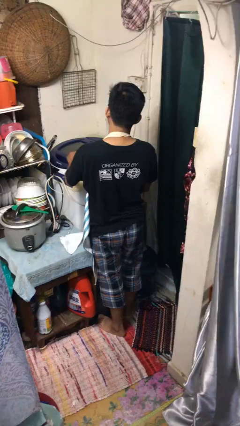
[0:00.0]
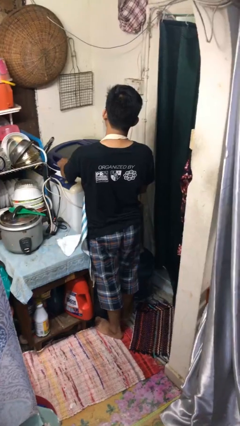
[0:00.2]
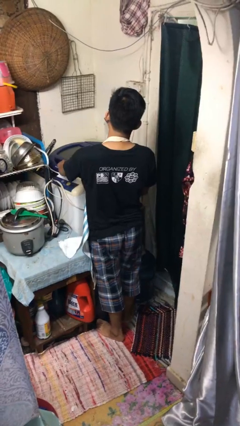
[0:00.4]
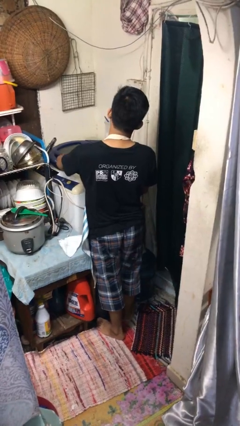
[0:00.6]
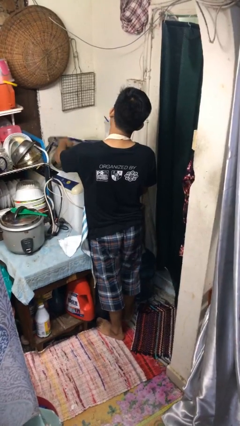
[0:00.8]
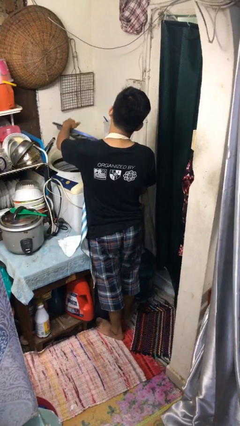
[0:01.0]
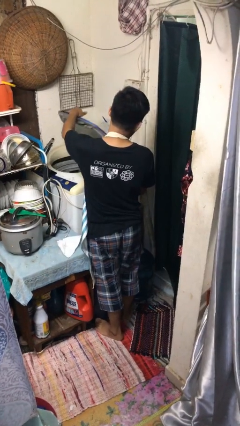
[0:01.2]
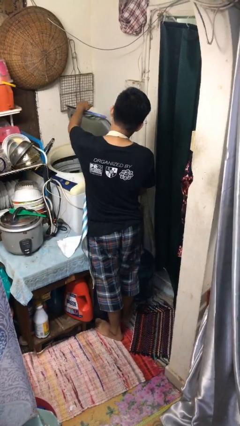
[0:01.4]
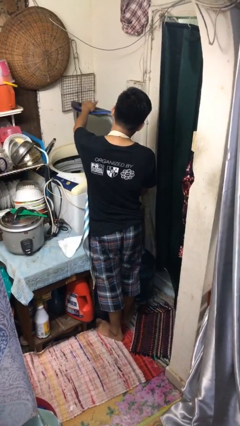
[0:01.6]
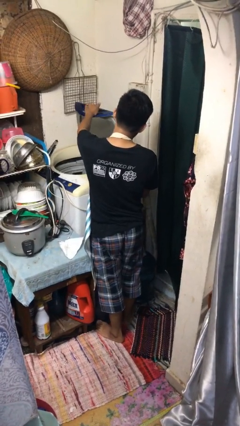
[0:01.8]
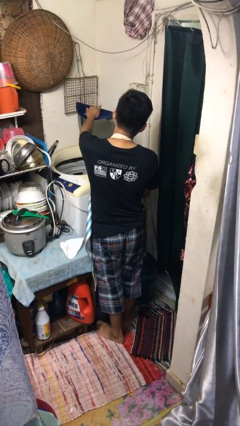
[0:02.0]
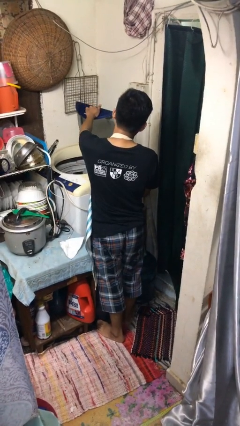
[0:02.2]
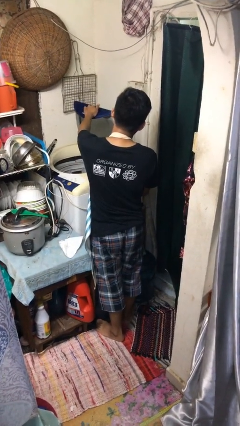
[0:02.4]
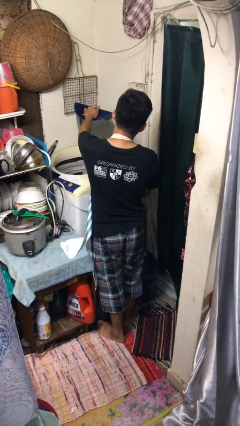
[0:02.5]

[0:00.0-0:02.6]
person opens clothes washer

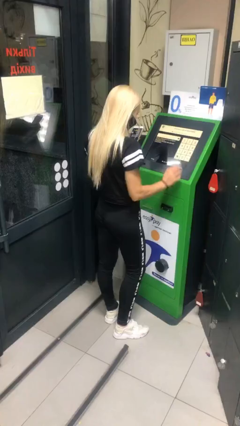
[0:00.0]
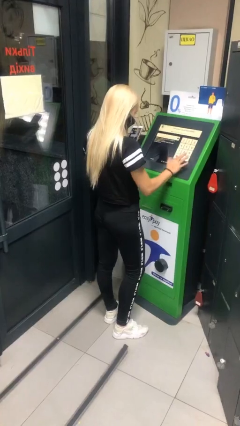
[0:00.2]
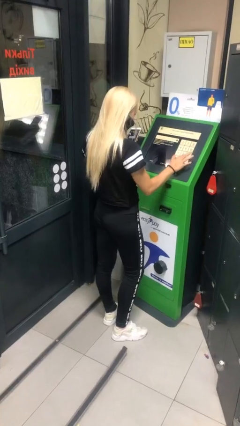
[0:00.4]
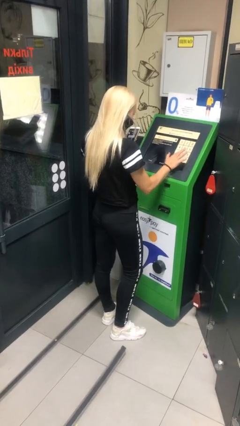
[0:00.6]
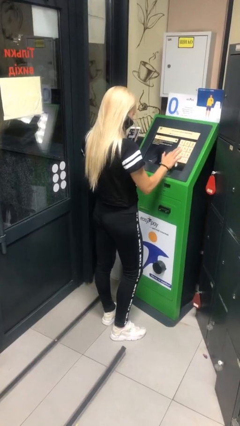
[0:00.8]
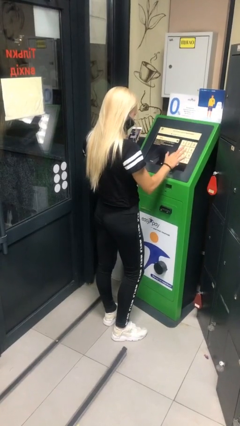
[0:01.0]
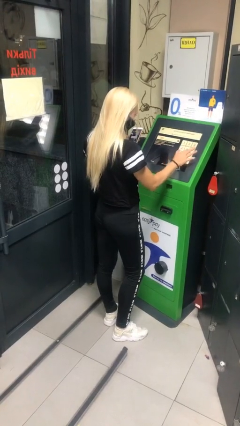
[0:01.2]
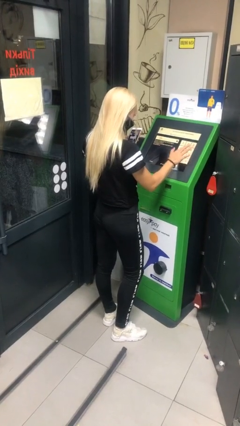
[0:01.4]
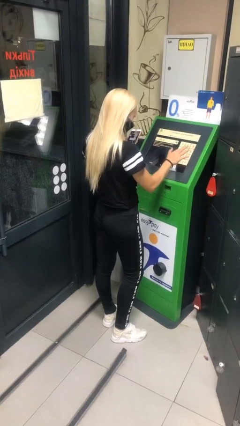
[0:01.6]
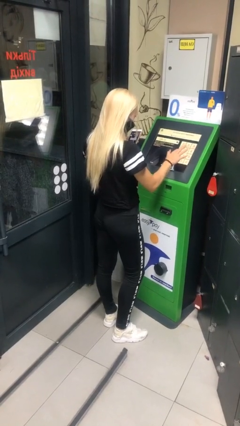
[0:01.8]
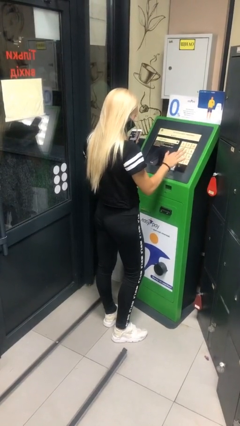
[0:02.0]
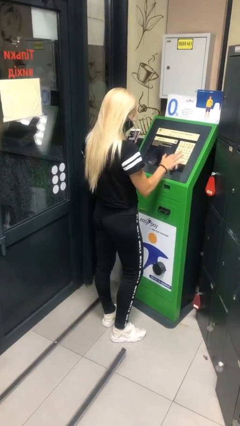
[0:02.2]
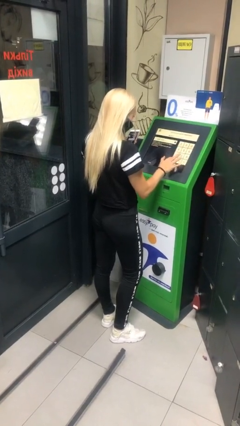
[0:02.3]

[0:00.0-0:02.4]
person purchases from machine

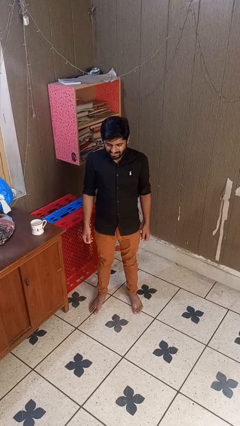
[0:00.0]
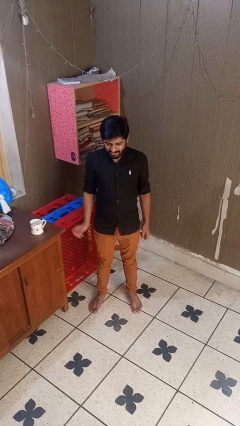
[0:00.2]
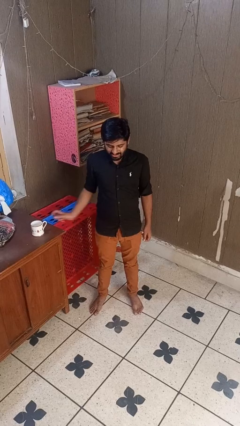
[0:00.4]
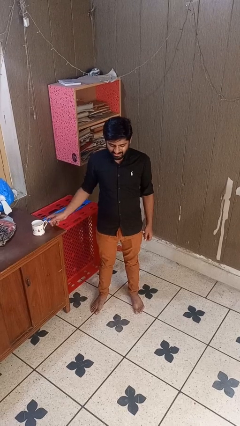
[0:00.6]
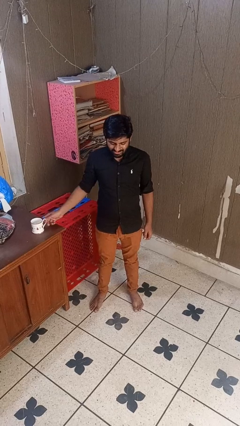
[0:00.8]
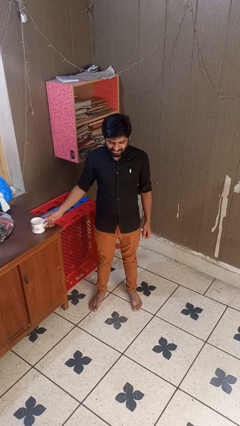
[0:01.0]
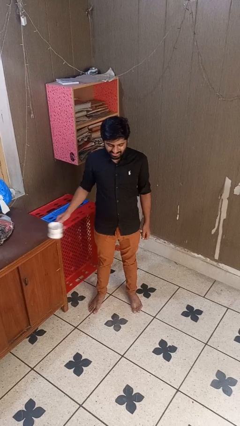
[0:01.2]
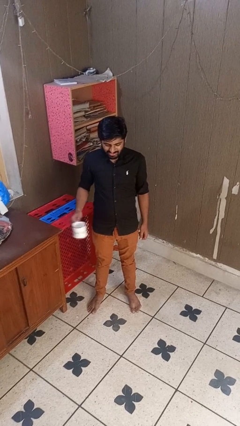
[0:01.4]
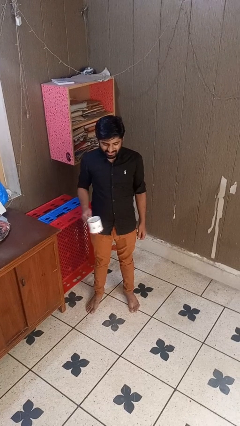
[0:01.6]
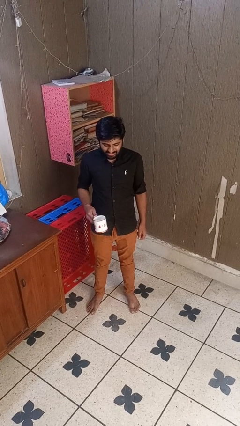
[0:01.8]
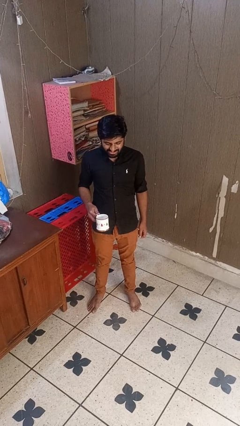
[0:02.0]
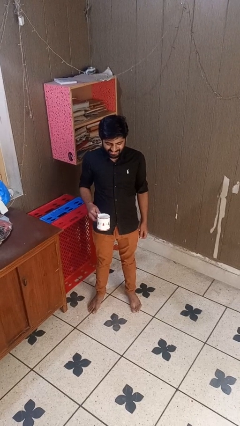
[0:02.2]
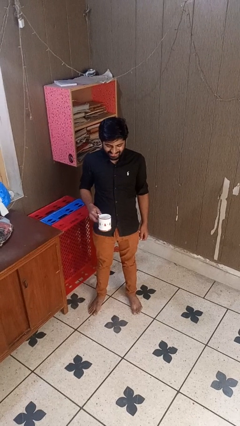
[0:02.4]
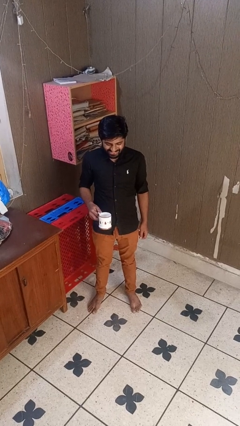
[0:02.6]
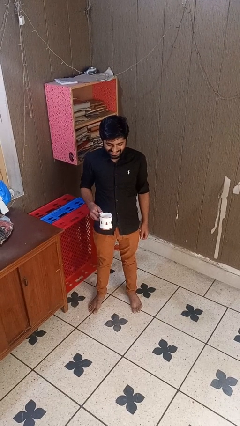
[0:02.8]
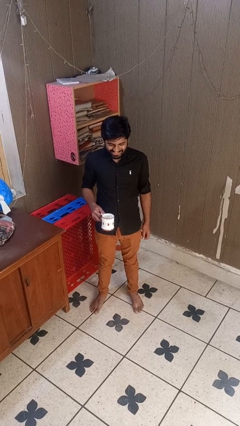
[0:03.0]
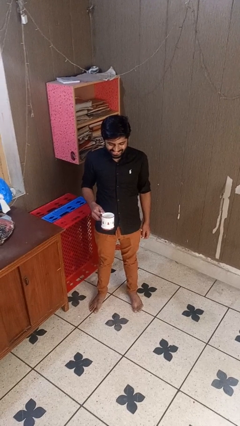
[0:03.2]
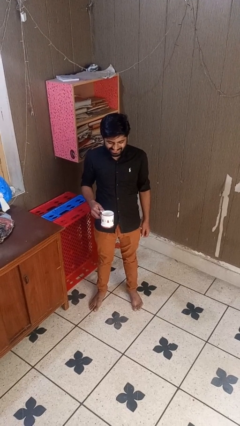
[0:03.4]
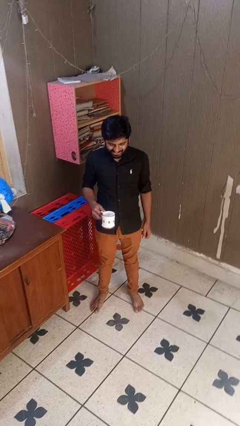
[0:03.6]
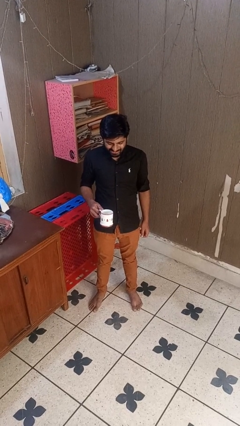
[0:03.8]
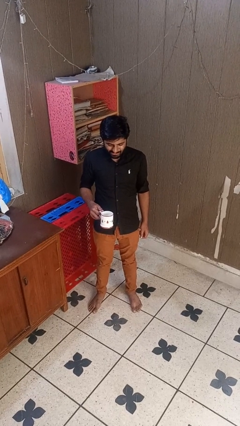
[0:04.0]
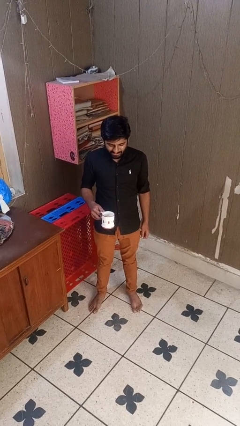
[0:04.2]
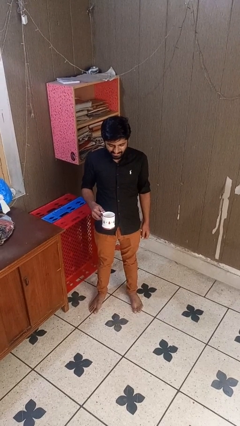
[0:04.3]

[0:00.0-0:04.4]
person picks up object from table

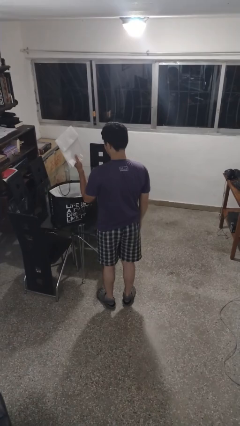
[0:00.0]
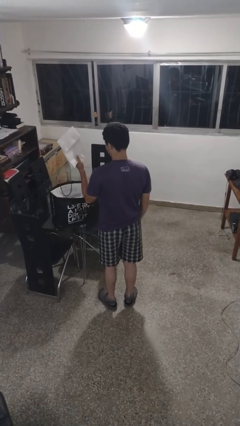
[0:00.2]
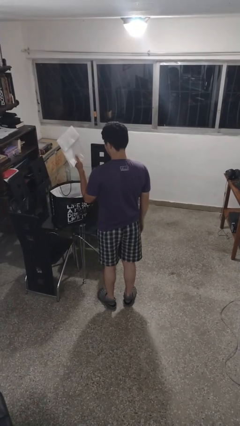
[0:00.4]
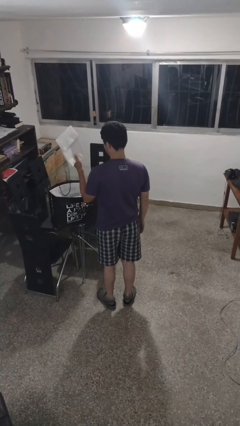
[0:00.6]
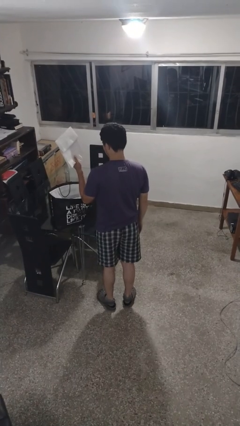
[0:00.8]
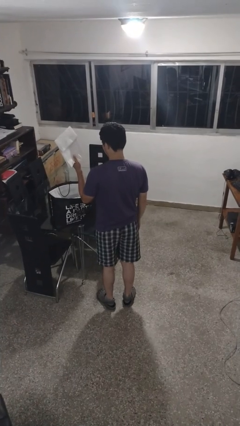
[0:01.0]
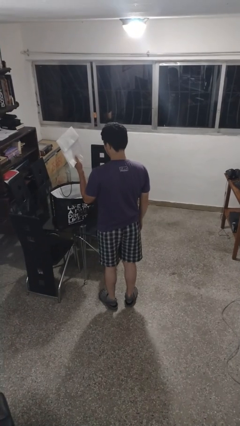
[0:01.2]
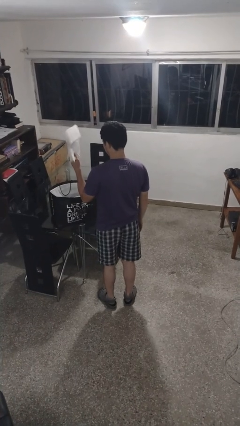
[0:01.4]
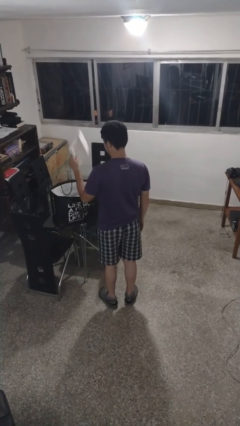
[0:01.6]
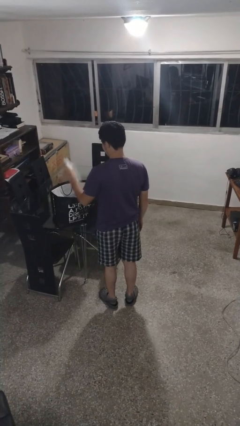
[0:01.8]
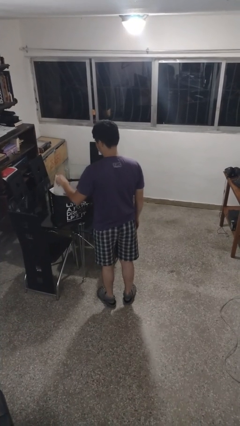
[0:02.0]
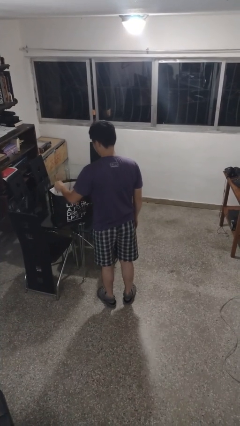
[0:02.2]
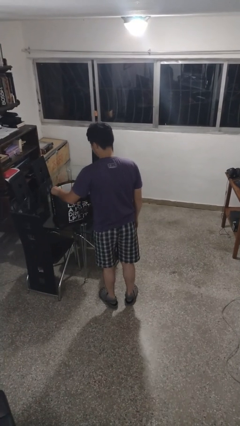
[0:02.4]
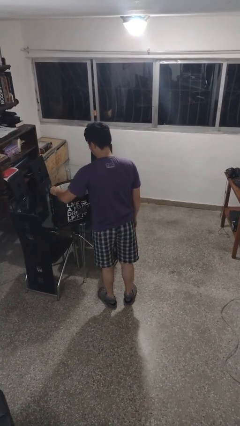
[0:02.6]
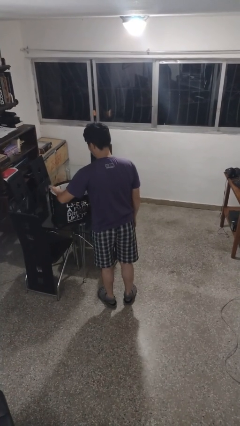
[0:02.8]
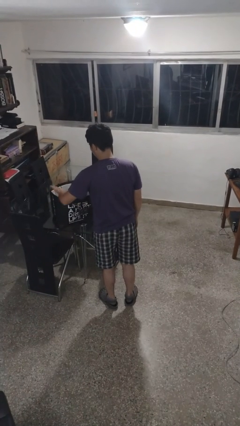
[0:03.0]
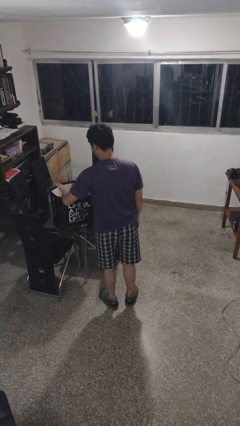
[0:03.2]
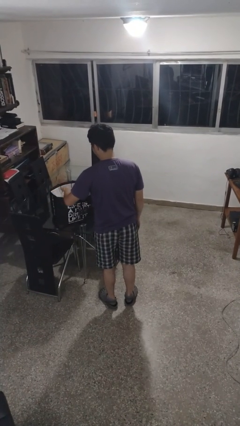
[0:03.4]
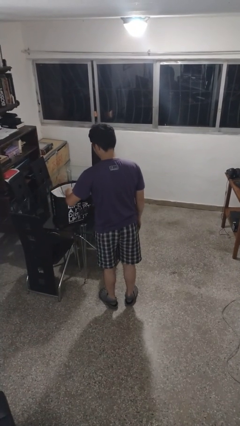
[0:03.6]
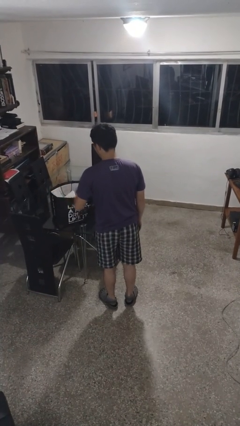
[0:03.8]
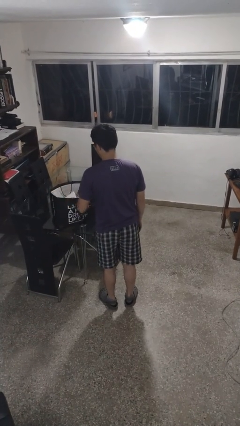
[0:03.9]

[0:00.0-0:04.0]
person puts object into bag

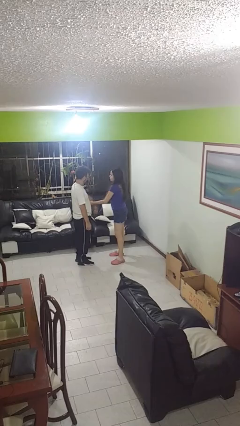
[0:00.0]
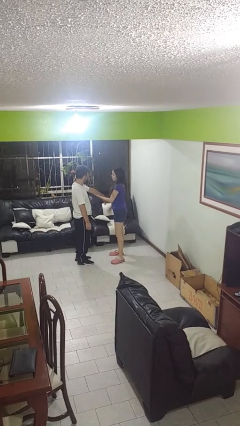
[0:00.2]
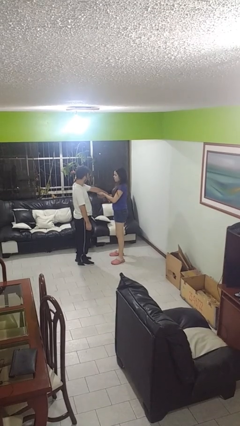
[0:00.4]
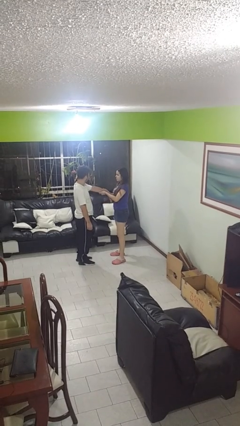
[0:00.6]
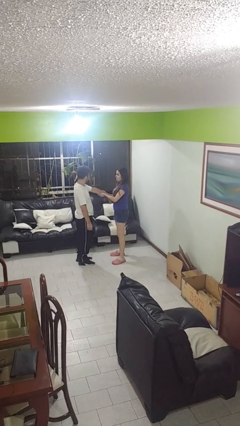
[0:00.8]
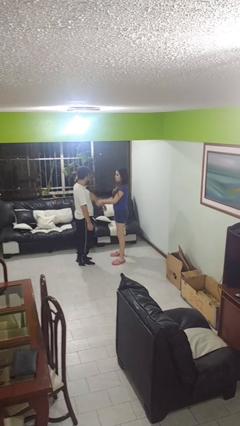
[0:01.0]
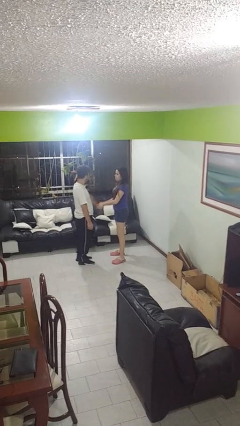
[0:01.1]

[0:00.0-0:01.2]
person grabs person by forearm

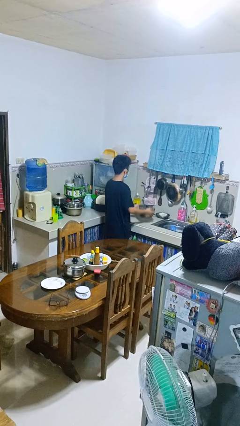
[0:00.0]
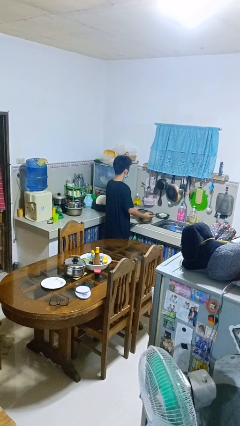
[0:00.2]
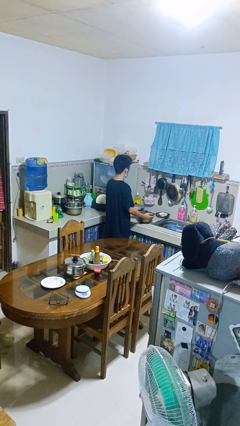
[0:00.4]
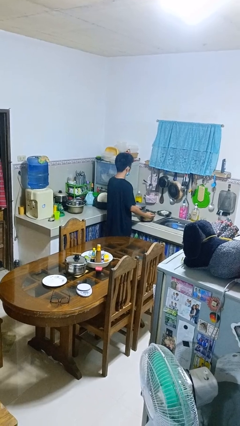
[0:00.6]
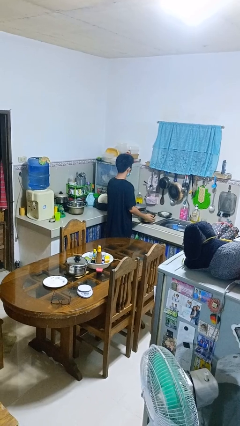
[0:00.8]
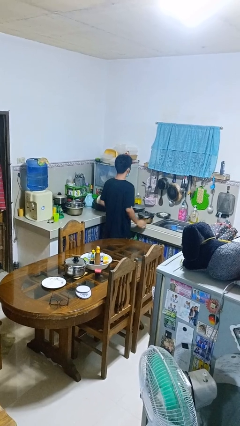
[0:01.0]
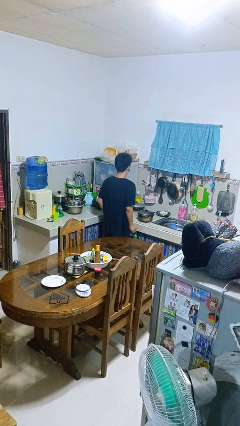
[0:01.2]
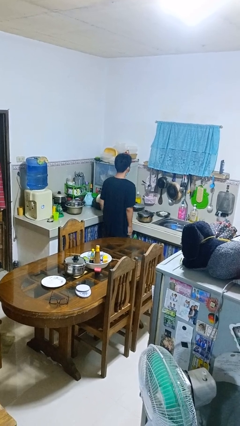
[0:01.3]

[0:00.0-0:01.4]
person puts down object on countertop

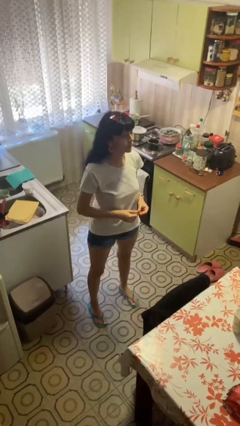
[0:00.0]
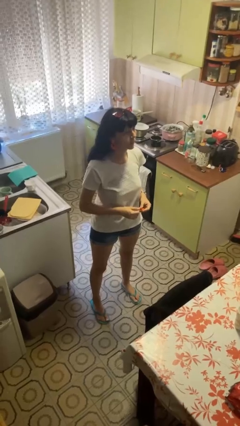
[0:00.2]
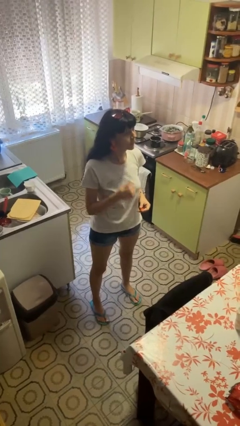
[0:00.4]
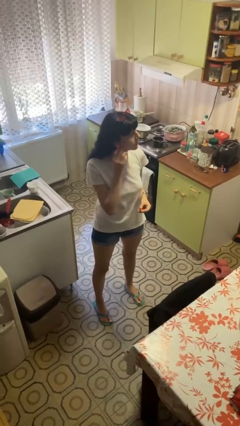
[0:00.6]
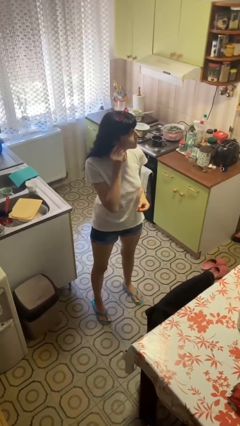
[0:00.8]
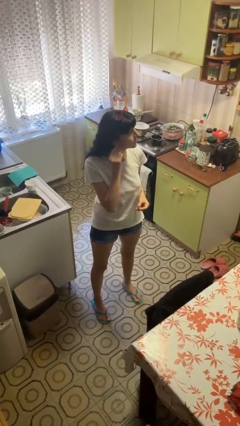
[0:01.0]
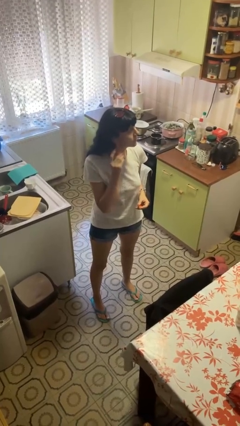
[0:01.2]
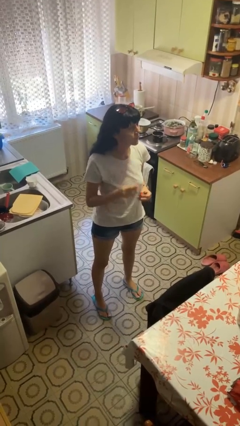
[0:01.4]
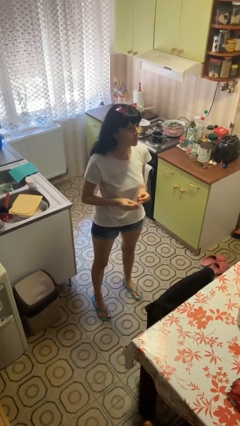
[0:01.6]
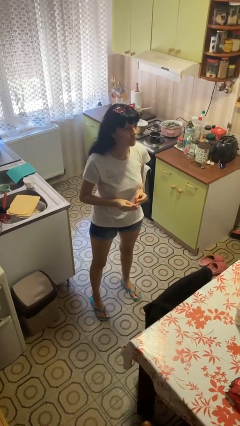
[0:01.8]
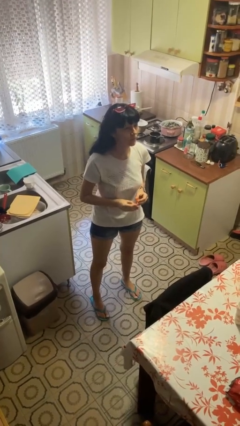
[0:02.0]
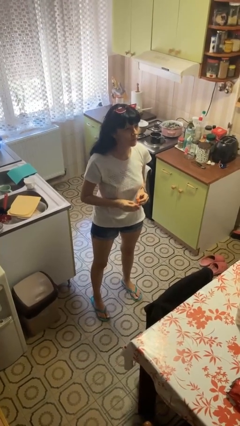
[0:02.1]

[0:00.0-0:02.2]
person takes off earrings
